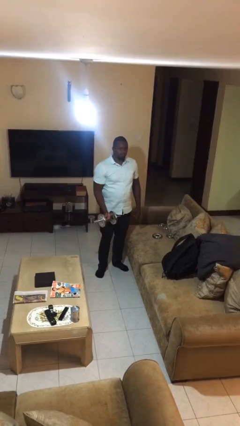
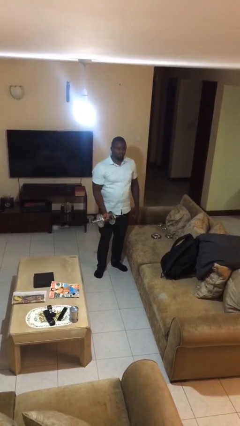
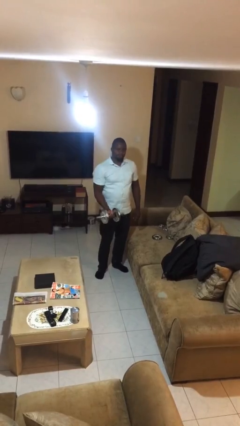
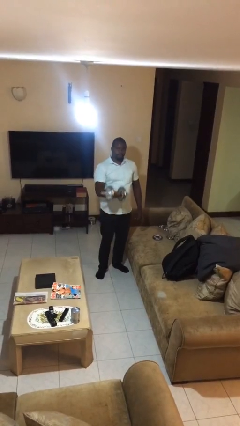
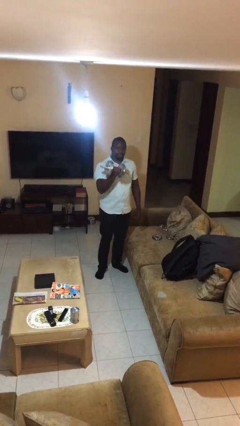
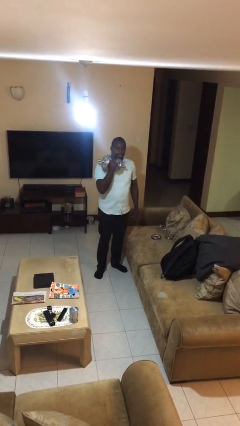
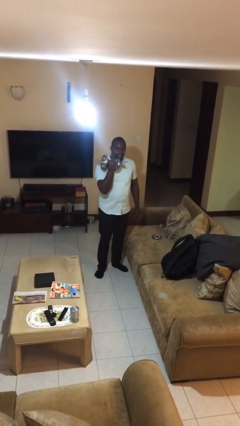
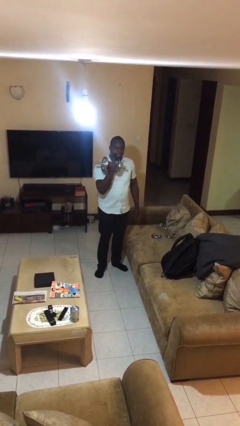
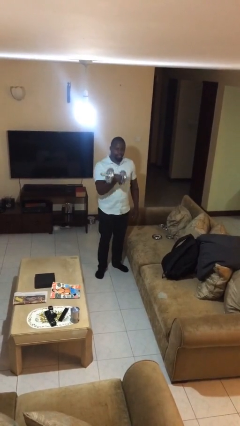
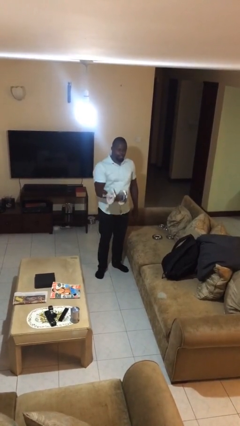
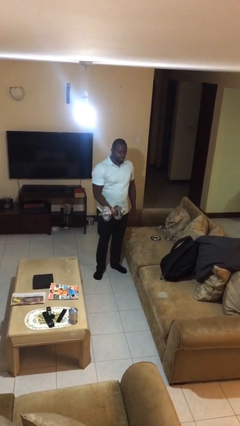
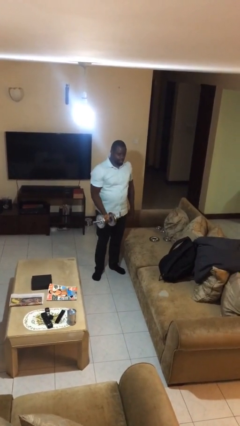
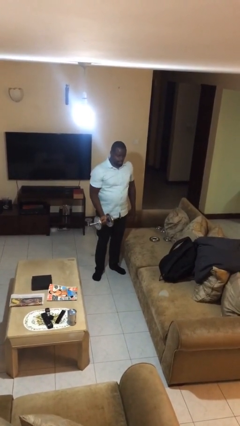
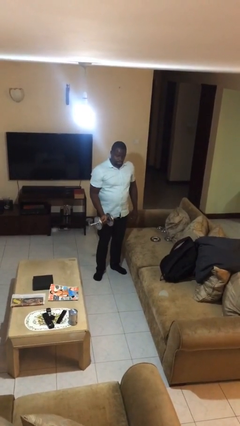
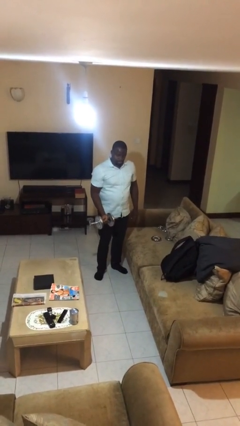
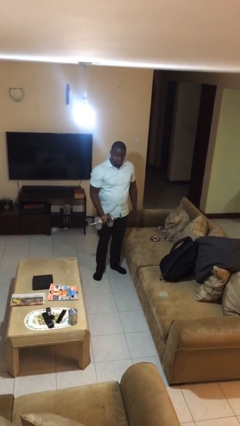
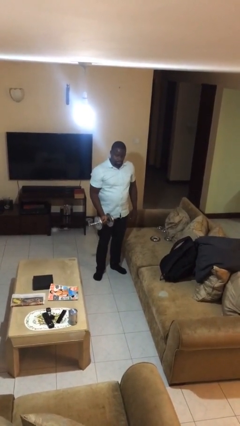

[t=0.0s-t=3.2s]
person lifts dumbbells

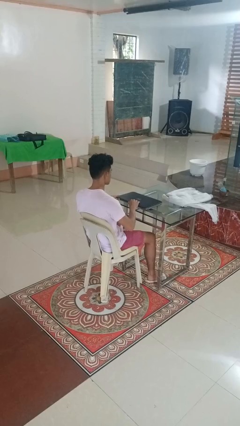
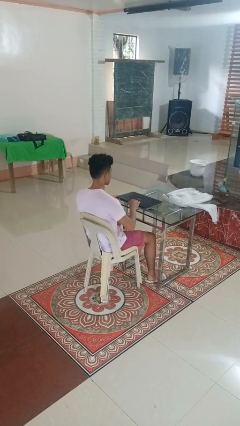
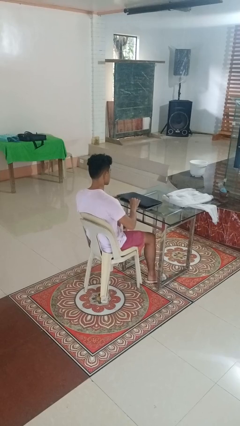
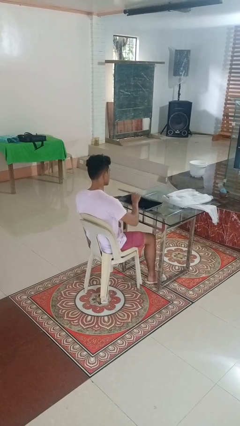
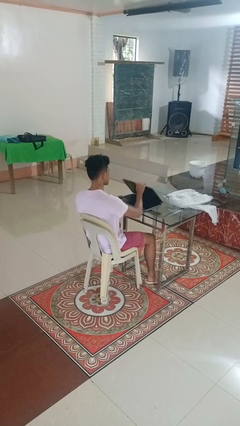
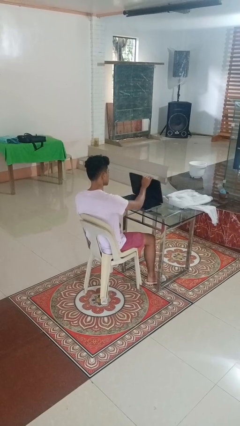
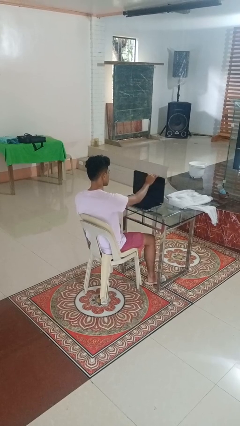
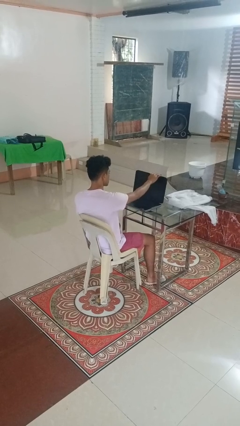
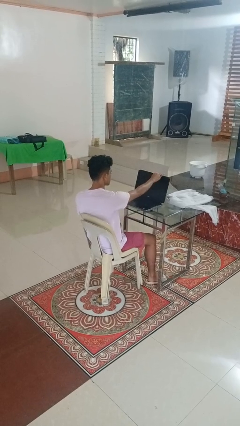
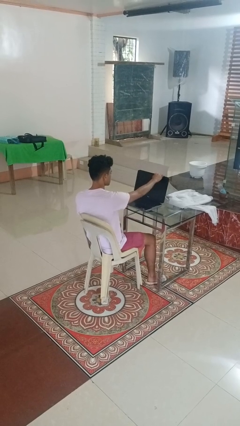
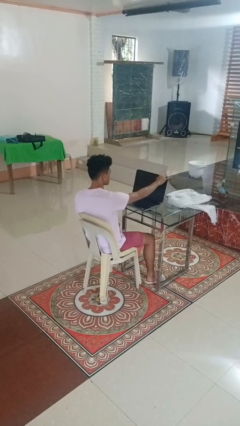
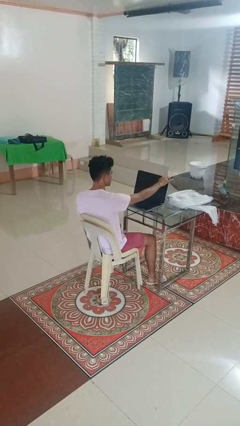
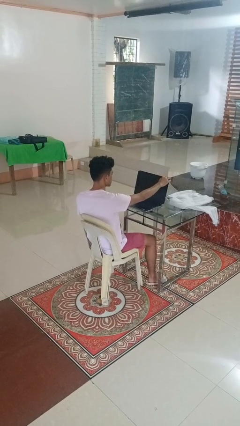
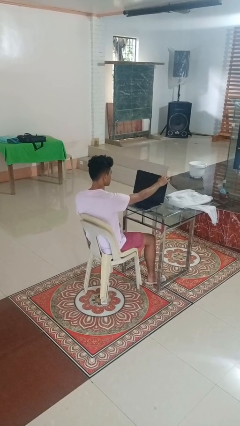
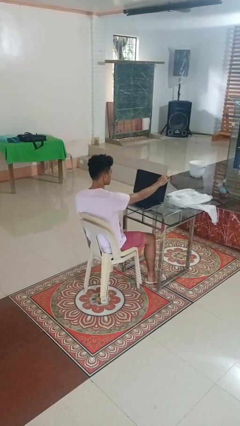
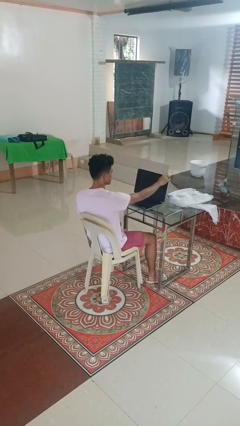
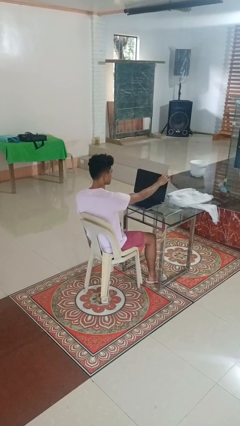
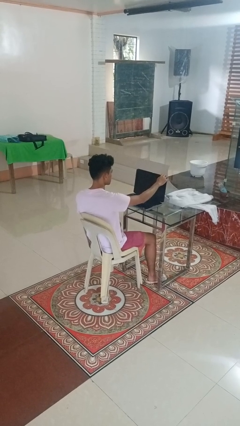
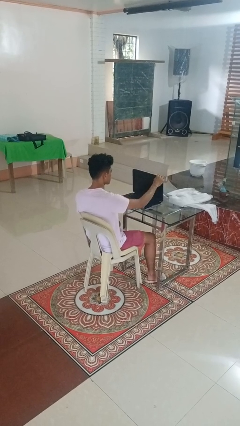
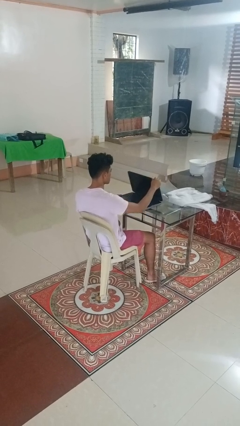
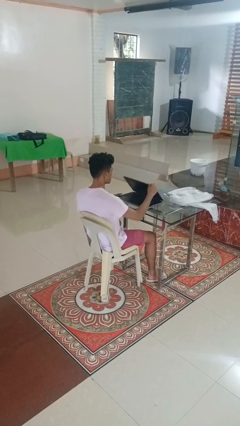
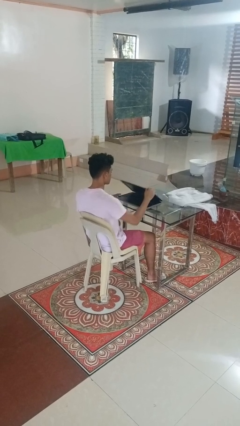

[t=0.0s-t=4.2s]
person opens laptop

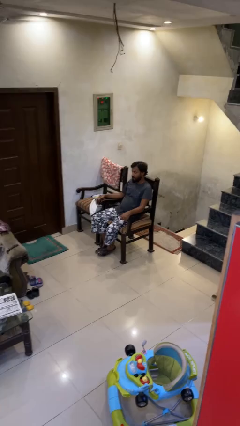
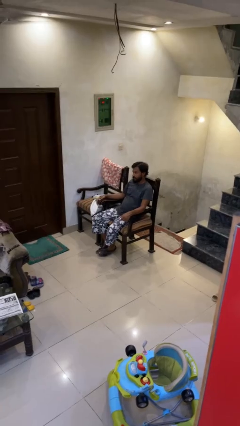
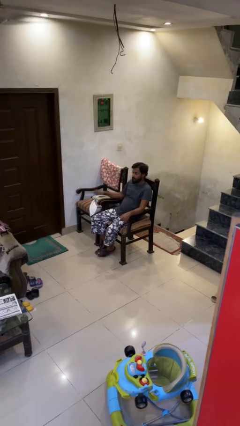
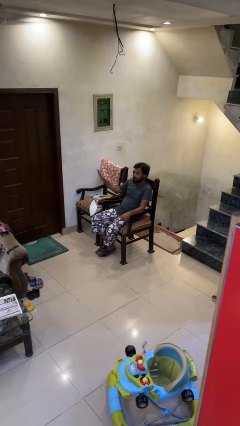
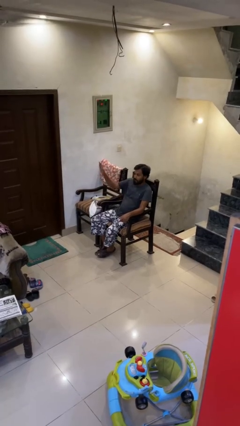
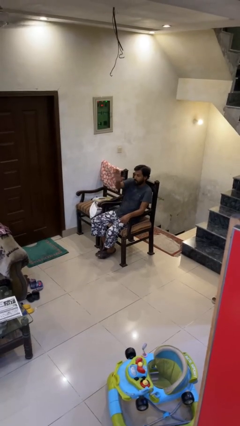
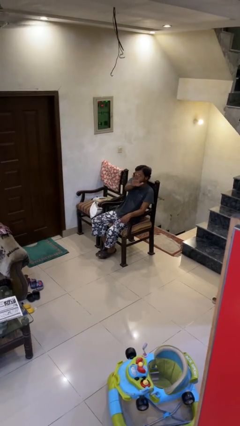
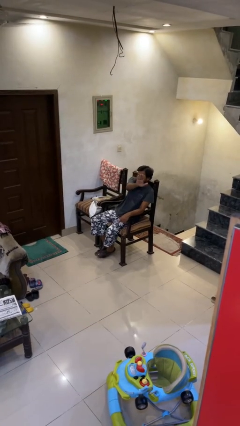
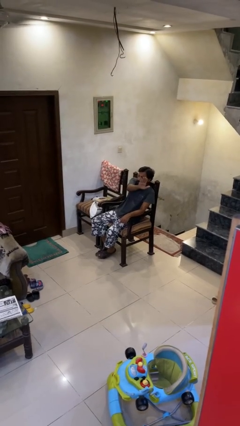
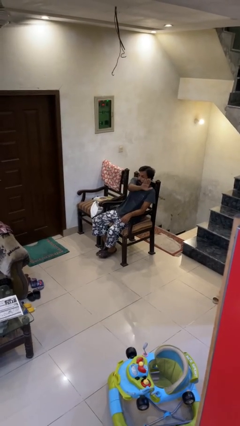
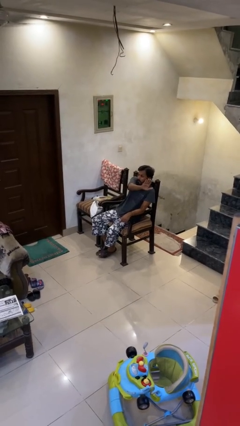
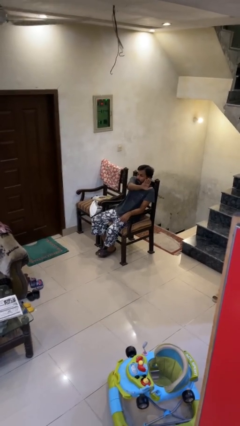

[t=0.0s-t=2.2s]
person gestures swipe left

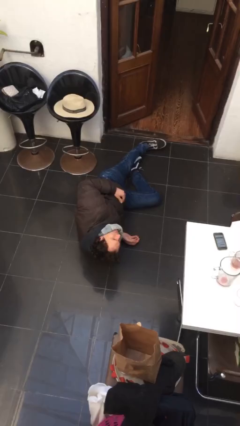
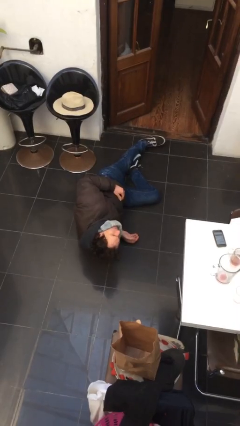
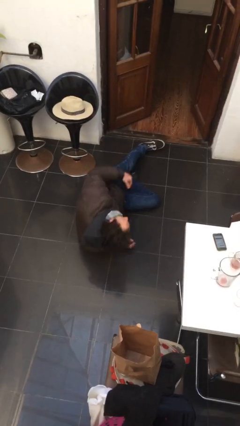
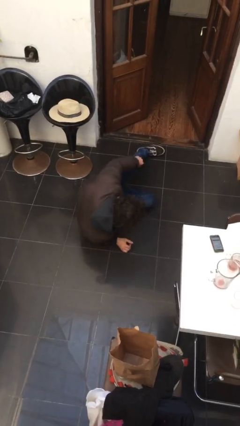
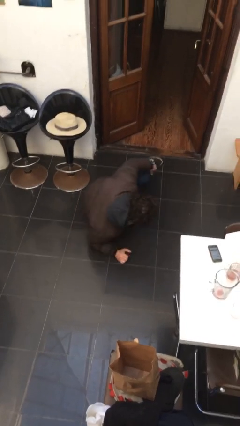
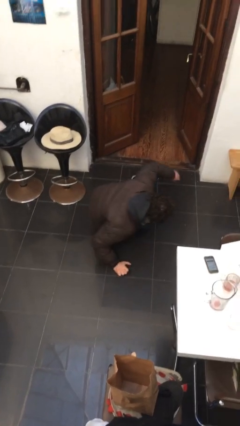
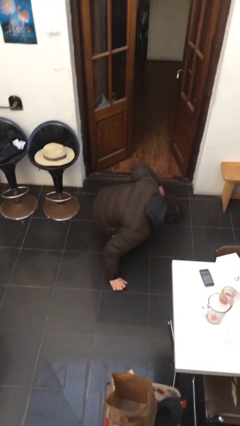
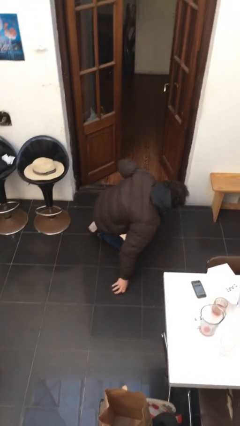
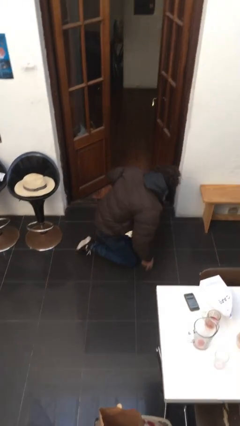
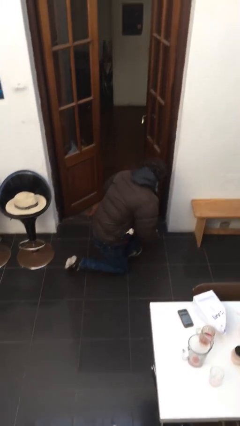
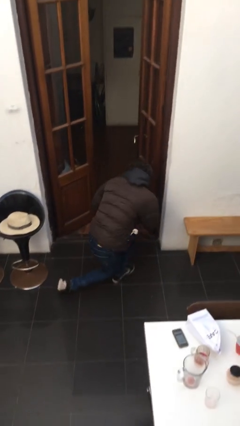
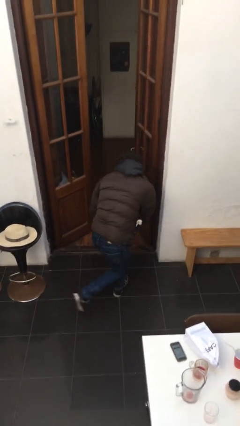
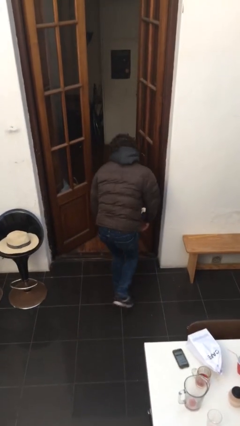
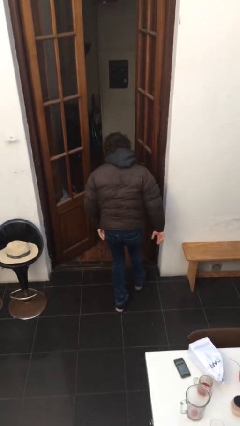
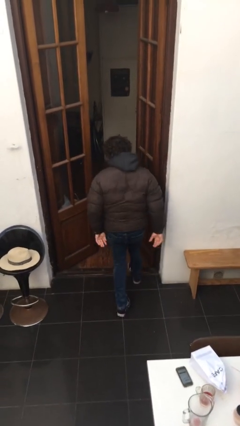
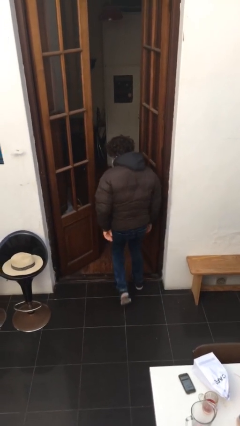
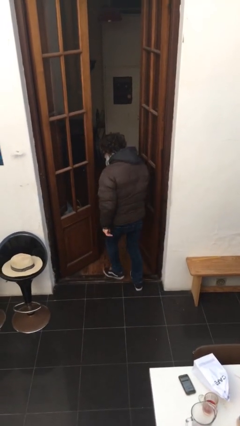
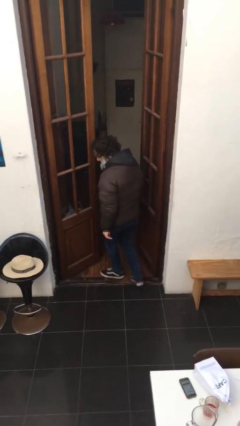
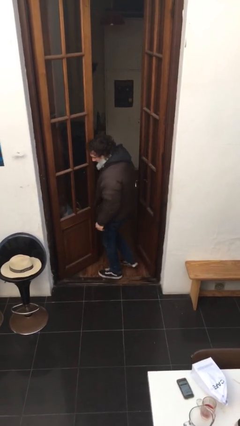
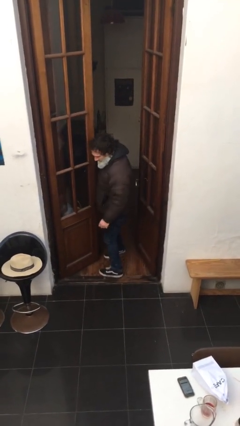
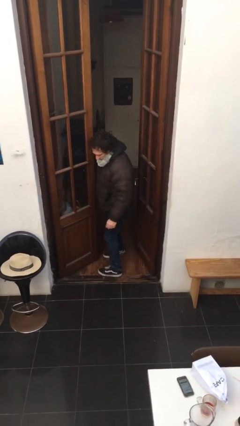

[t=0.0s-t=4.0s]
person stands up from floor

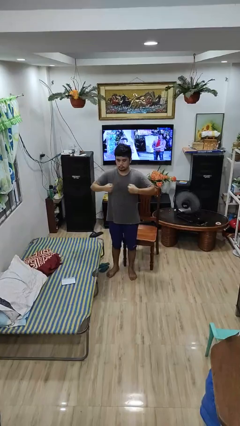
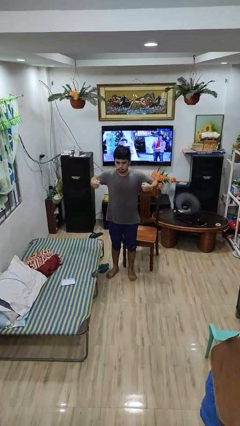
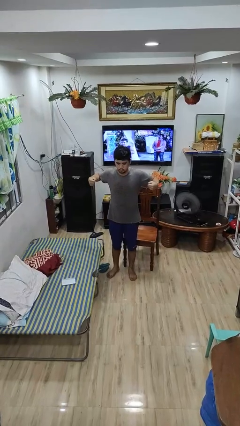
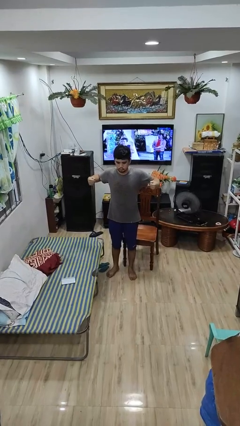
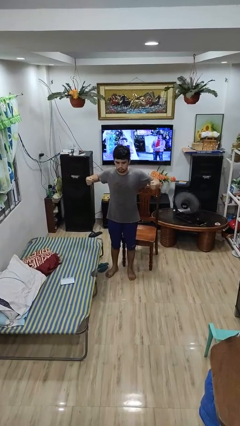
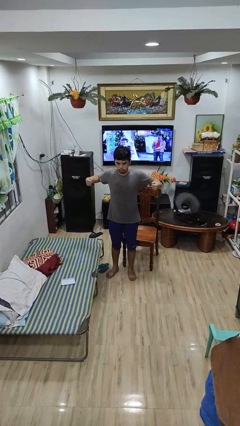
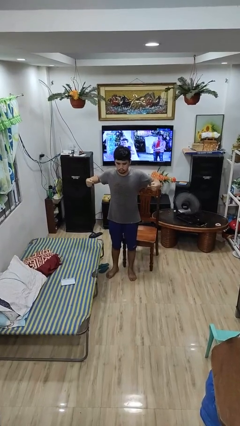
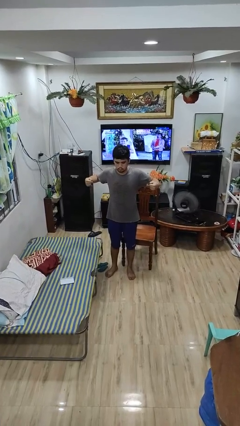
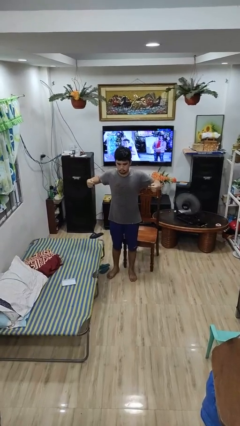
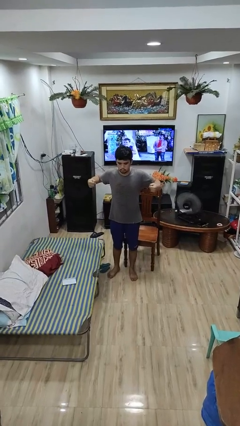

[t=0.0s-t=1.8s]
person gestures zoom in

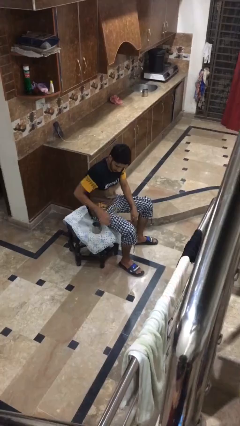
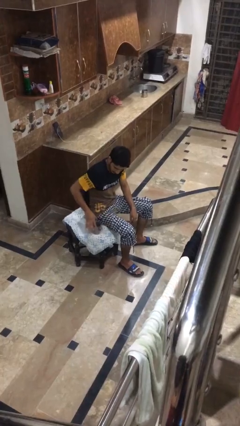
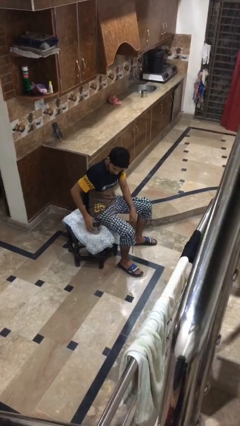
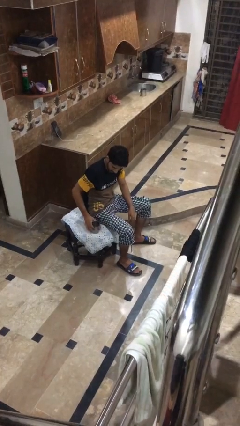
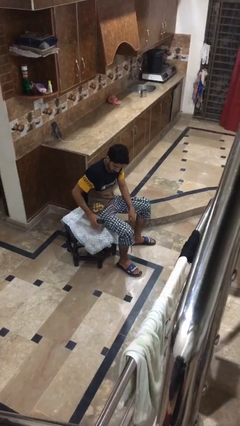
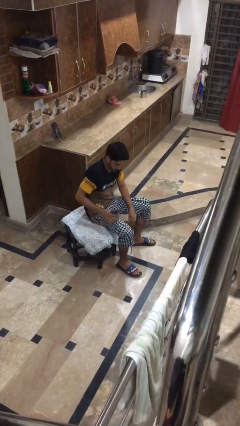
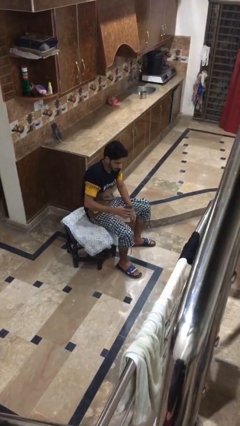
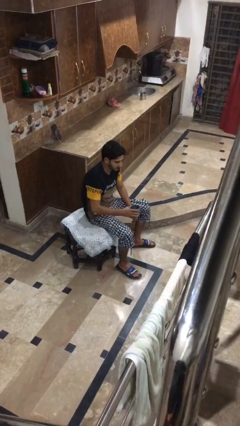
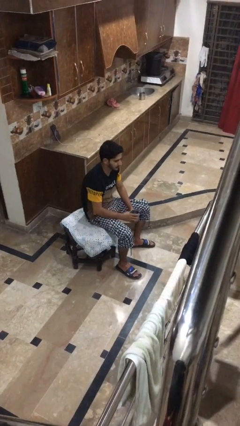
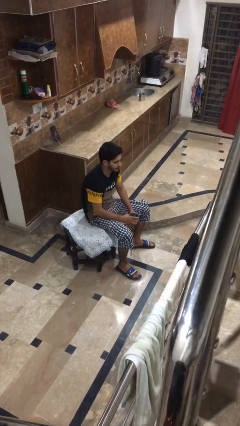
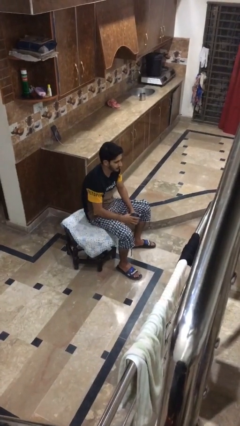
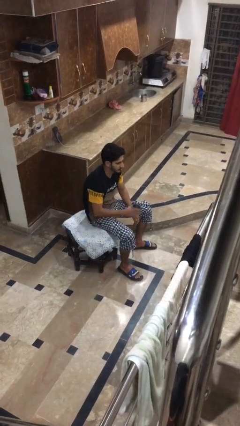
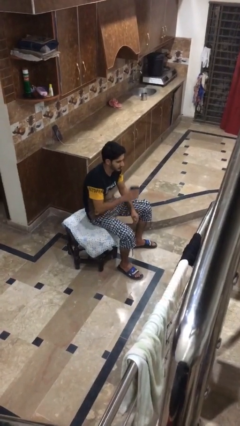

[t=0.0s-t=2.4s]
person picks up object from table
